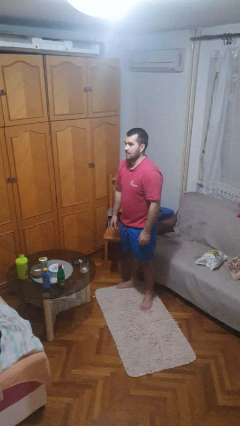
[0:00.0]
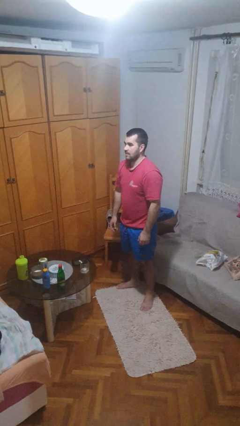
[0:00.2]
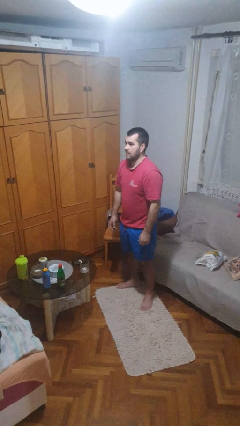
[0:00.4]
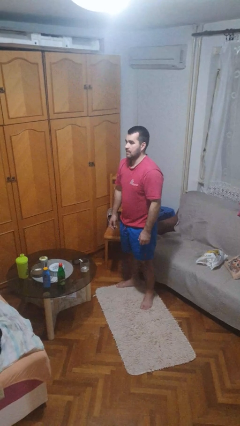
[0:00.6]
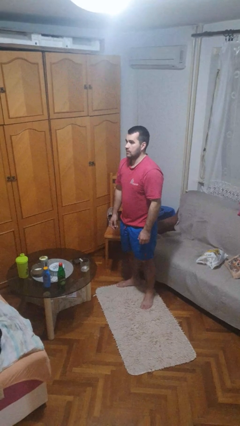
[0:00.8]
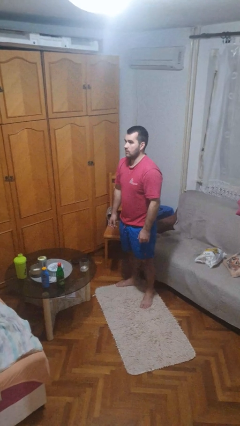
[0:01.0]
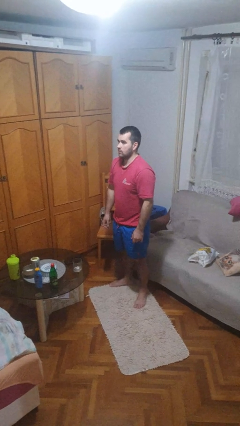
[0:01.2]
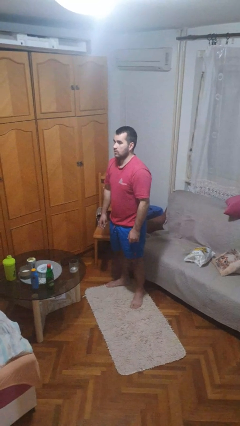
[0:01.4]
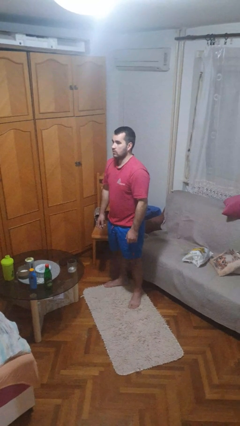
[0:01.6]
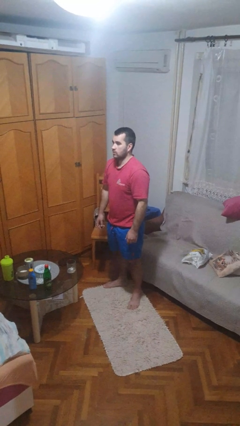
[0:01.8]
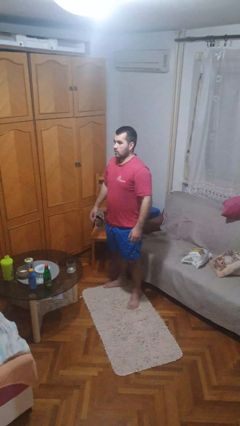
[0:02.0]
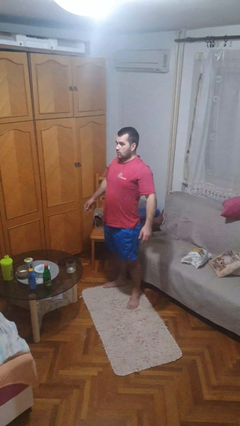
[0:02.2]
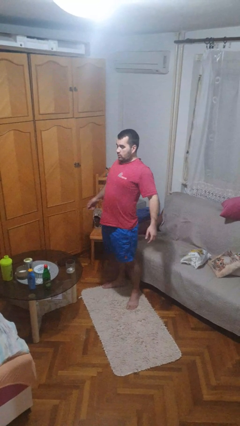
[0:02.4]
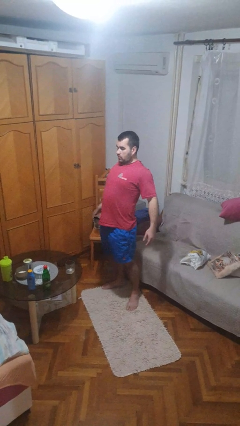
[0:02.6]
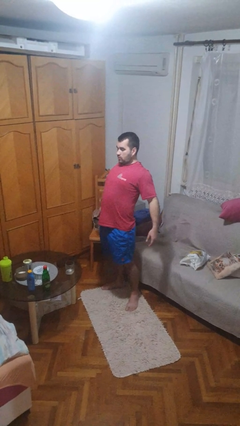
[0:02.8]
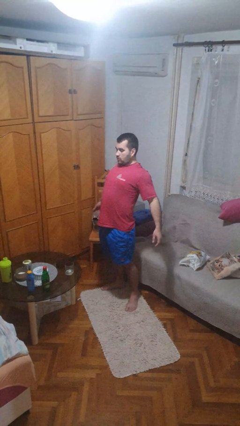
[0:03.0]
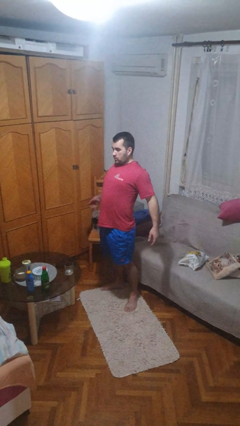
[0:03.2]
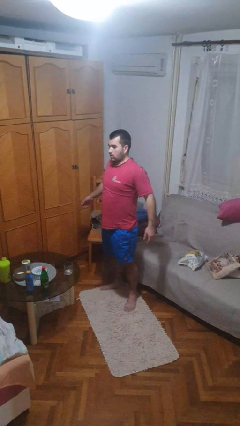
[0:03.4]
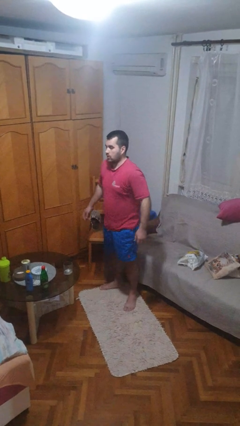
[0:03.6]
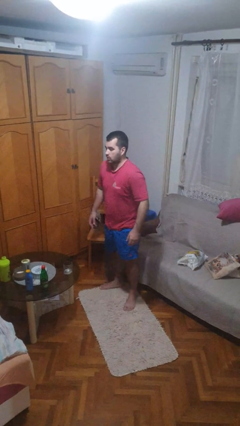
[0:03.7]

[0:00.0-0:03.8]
person stretches back

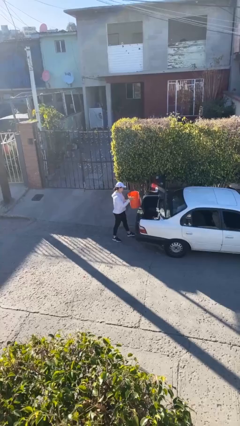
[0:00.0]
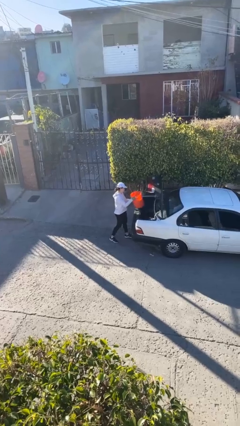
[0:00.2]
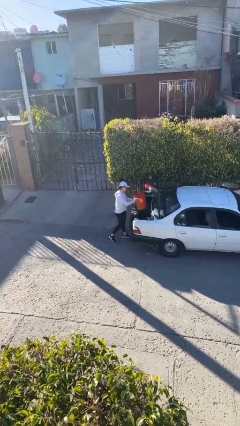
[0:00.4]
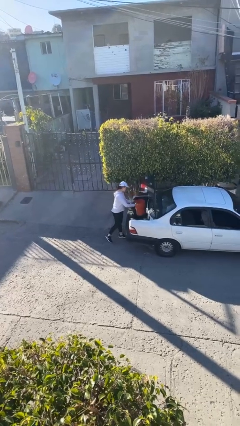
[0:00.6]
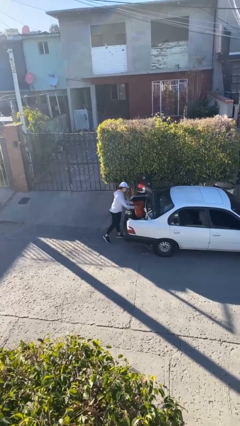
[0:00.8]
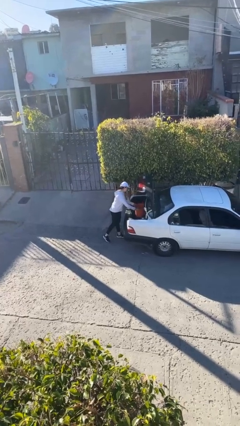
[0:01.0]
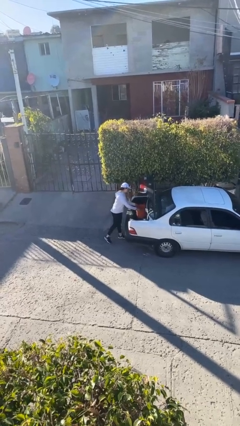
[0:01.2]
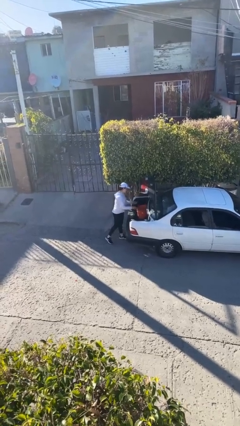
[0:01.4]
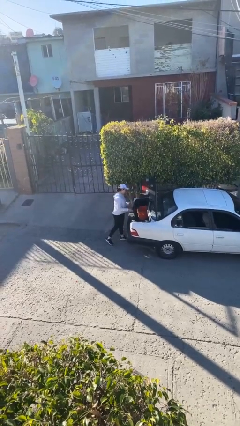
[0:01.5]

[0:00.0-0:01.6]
person loads car

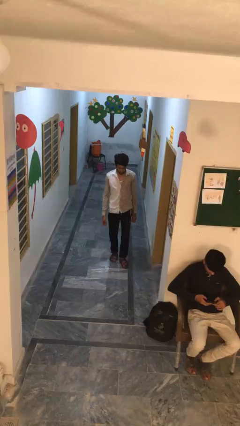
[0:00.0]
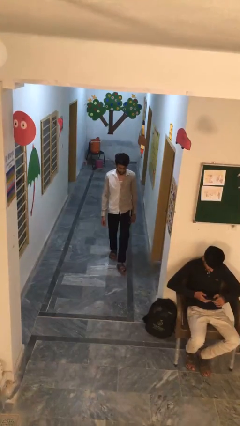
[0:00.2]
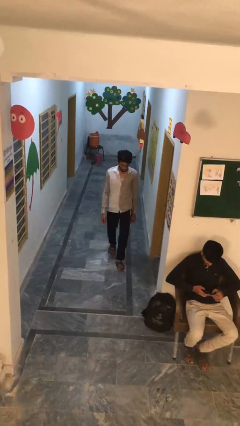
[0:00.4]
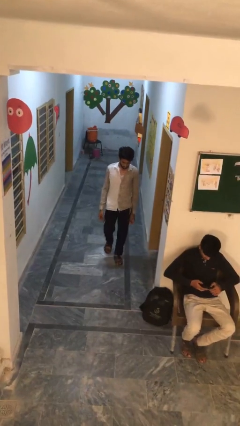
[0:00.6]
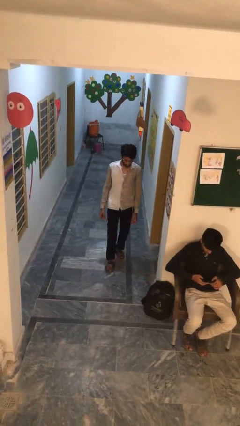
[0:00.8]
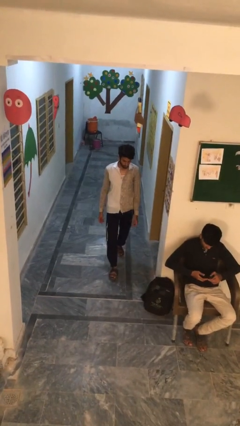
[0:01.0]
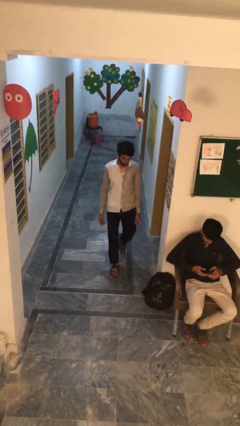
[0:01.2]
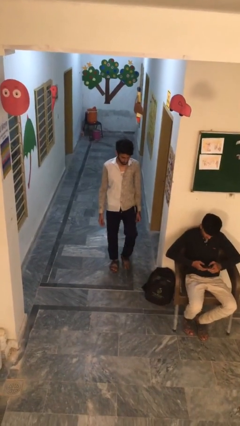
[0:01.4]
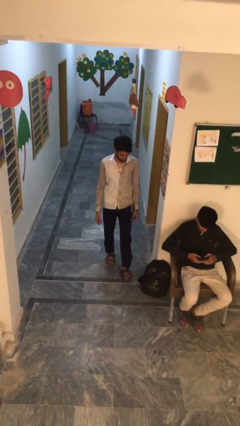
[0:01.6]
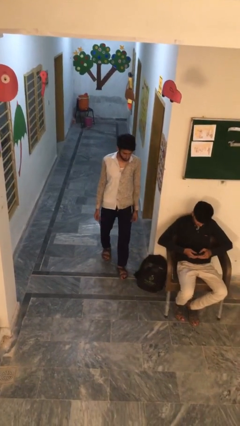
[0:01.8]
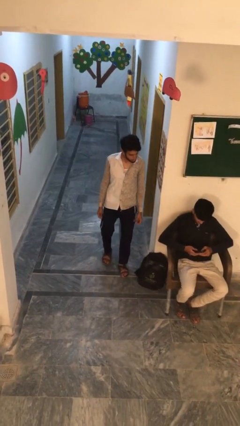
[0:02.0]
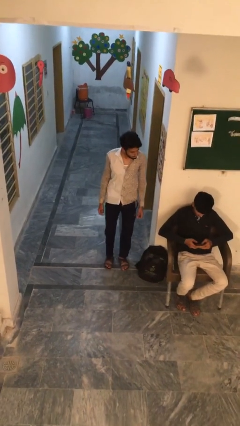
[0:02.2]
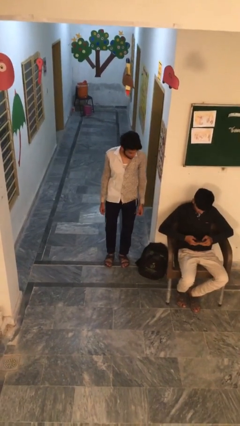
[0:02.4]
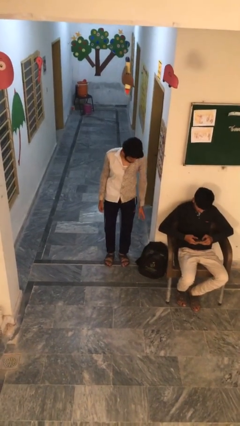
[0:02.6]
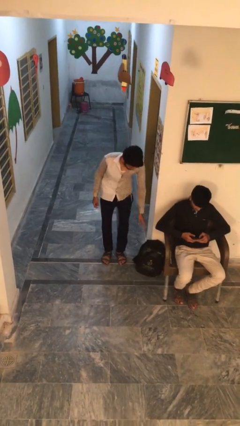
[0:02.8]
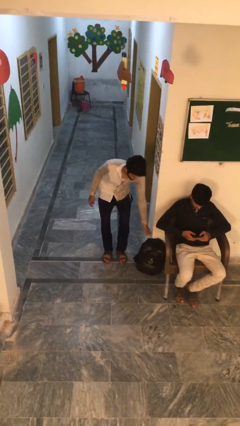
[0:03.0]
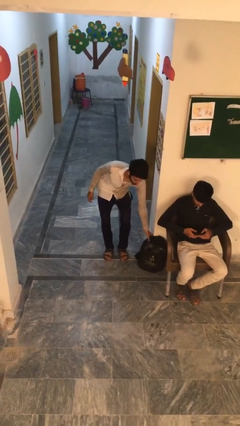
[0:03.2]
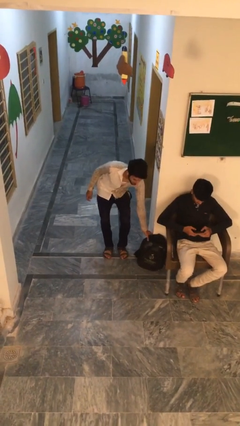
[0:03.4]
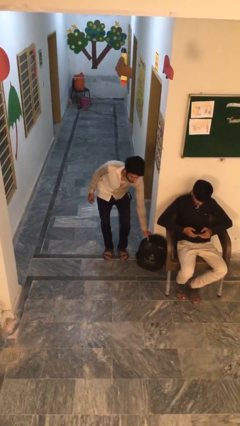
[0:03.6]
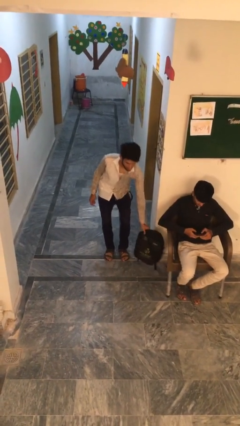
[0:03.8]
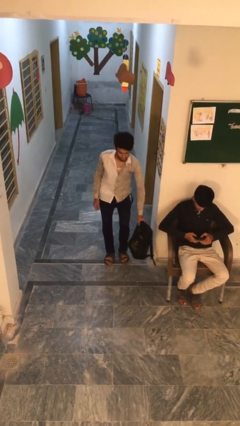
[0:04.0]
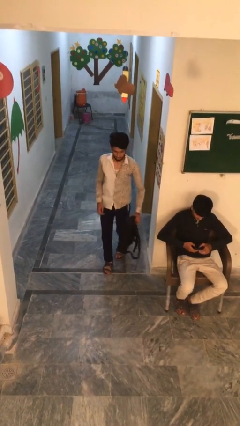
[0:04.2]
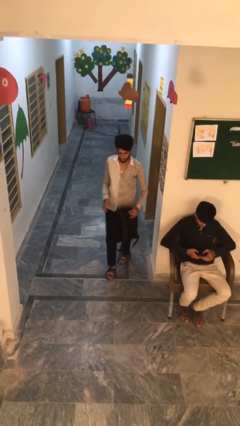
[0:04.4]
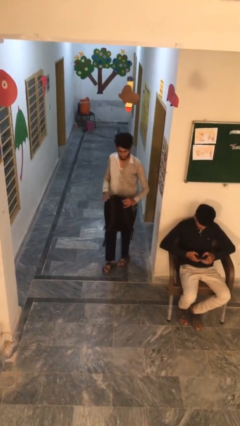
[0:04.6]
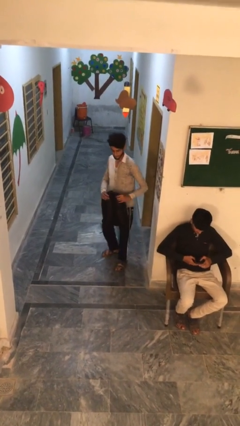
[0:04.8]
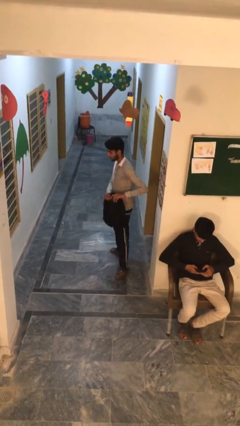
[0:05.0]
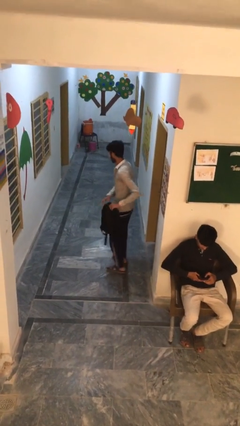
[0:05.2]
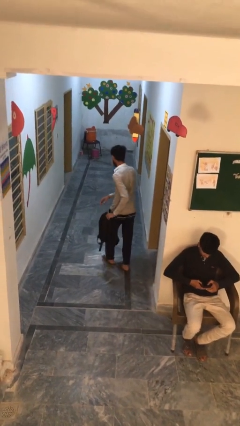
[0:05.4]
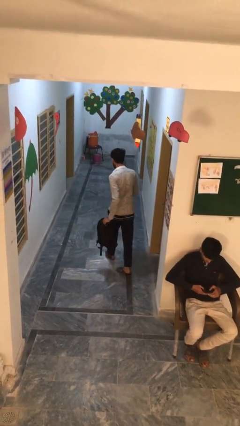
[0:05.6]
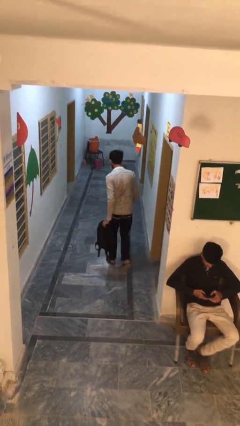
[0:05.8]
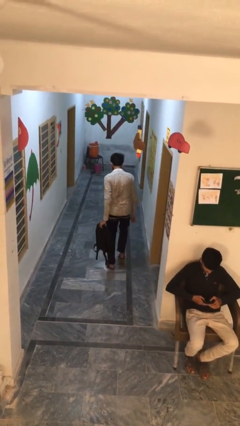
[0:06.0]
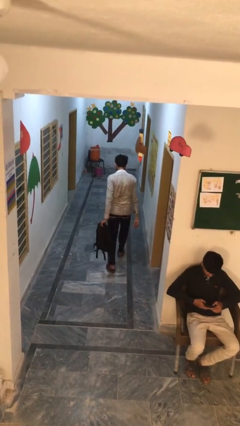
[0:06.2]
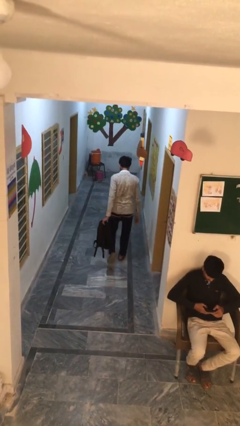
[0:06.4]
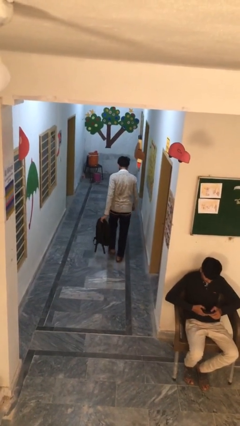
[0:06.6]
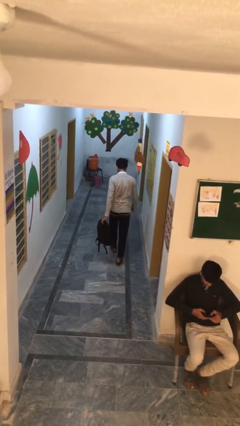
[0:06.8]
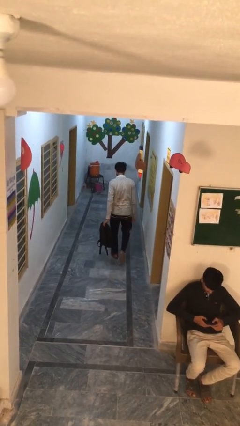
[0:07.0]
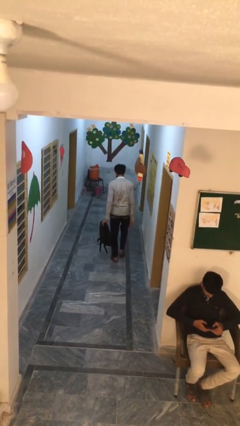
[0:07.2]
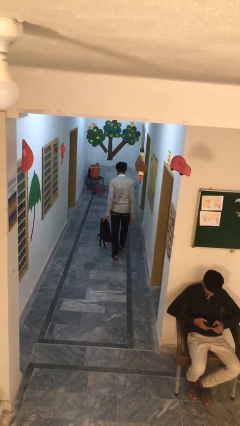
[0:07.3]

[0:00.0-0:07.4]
person steals object from person

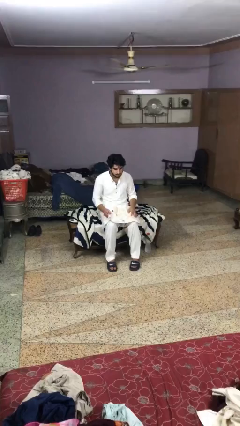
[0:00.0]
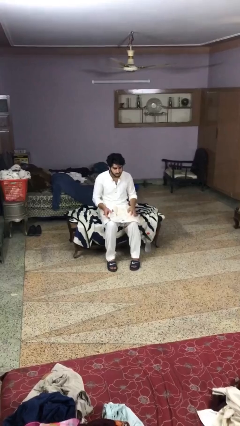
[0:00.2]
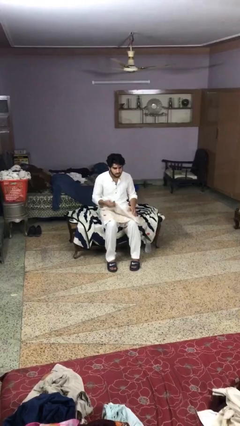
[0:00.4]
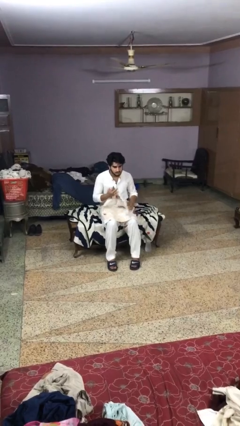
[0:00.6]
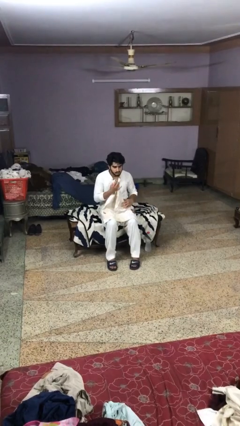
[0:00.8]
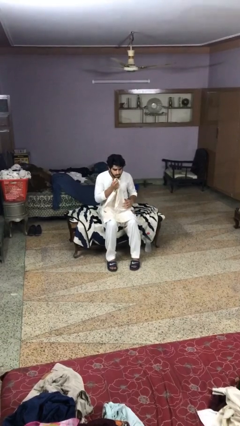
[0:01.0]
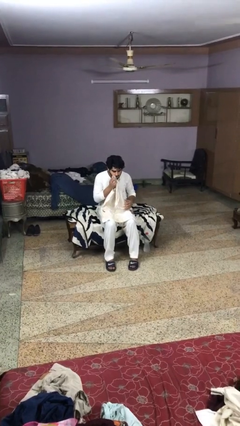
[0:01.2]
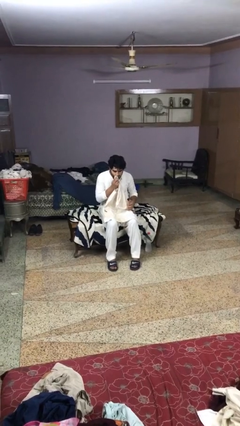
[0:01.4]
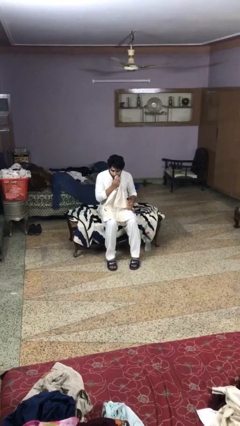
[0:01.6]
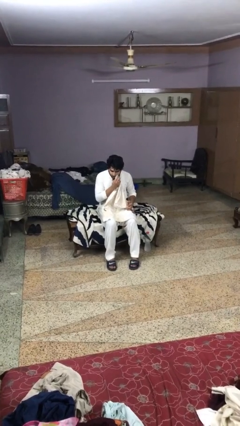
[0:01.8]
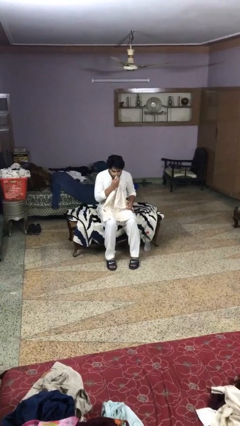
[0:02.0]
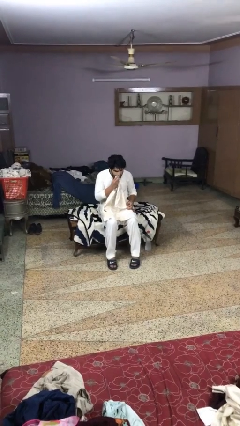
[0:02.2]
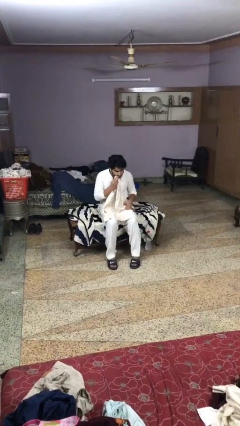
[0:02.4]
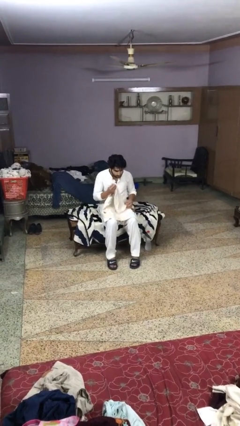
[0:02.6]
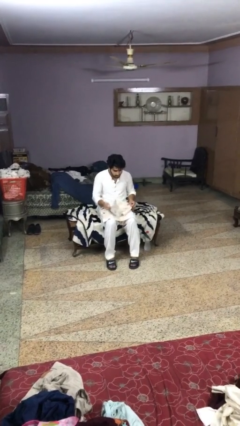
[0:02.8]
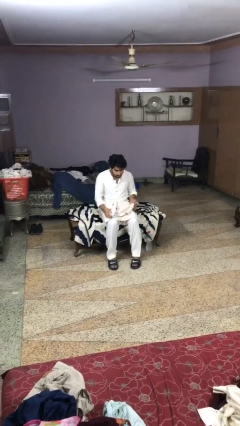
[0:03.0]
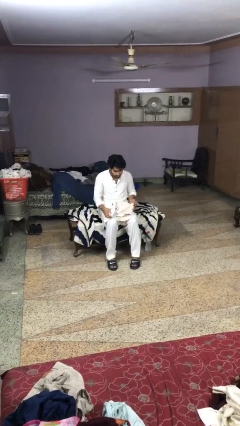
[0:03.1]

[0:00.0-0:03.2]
person wipes mouth with napkin

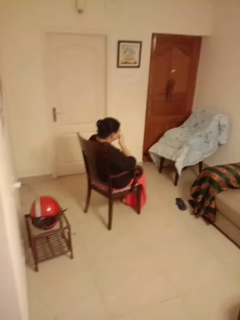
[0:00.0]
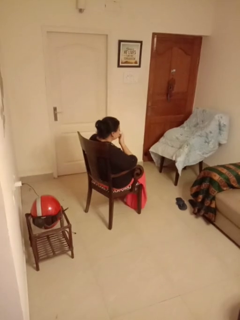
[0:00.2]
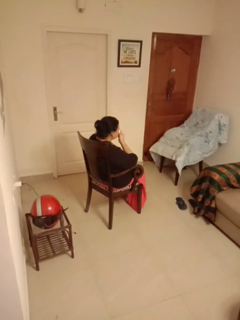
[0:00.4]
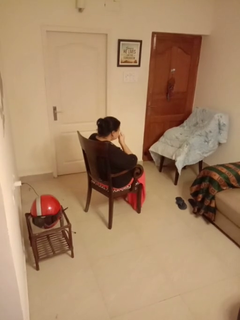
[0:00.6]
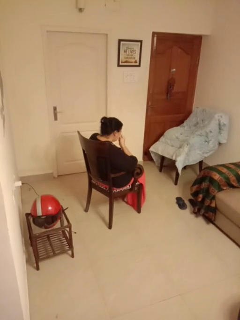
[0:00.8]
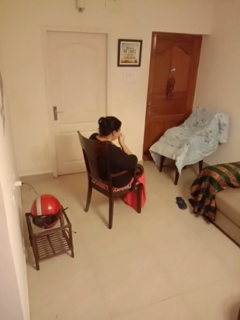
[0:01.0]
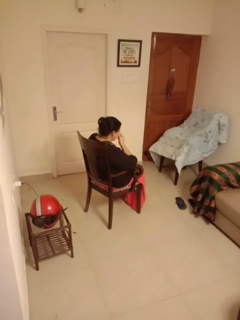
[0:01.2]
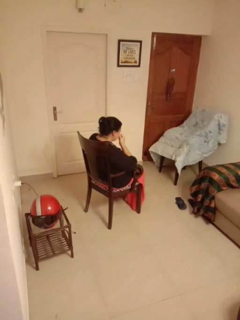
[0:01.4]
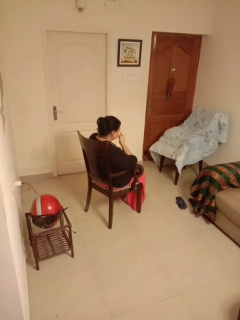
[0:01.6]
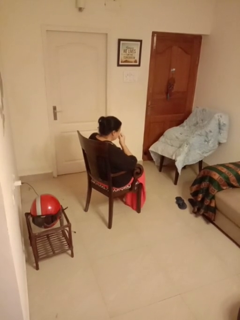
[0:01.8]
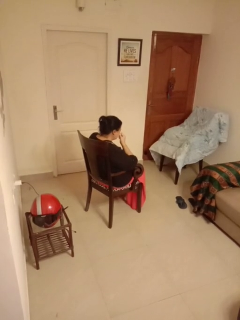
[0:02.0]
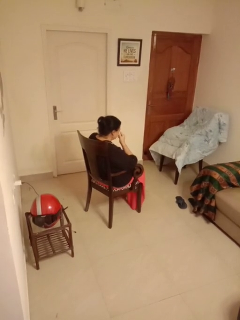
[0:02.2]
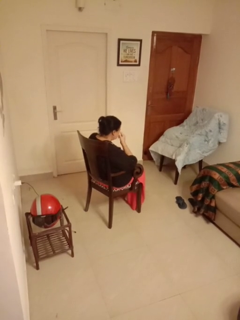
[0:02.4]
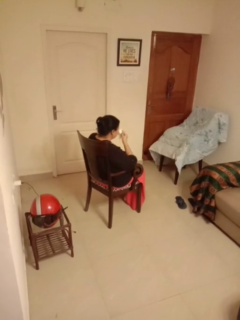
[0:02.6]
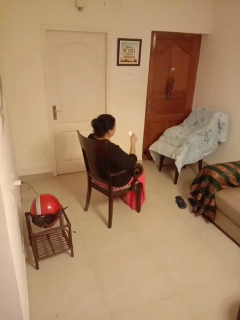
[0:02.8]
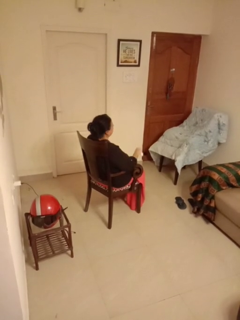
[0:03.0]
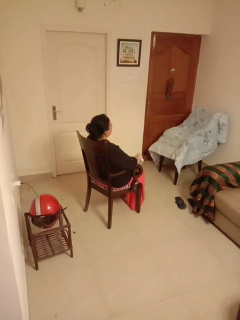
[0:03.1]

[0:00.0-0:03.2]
person blows nose
